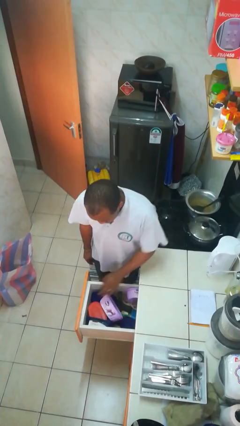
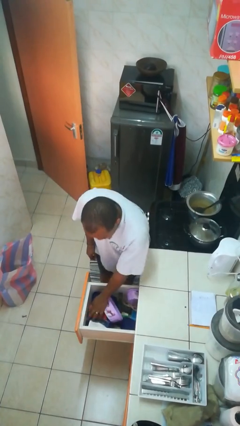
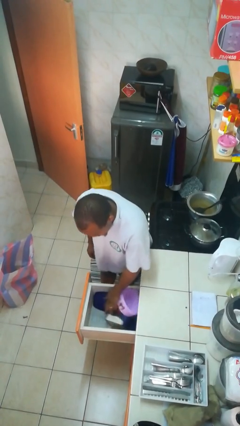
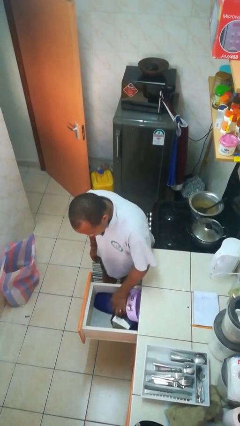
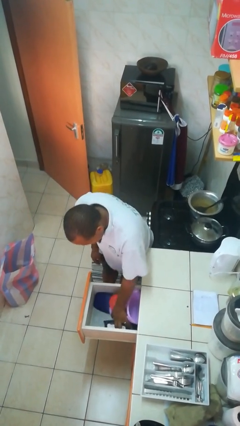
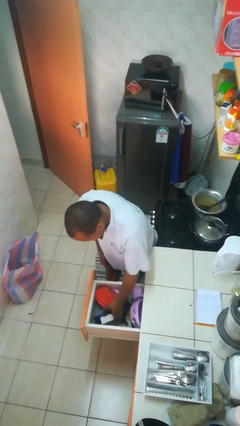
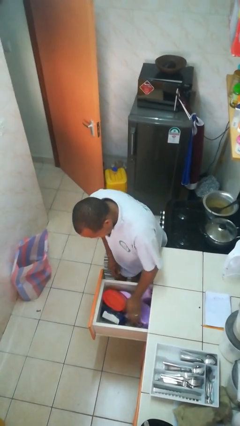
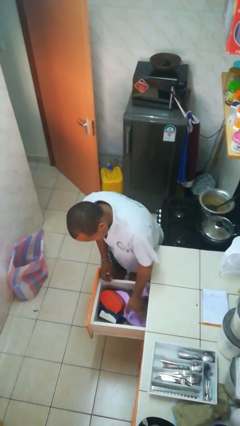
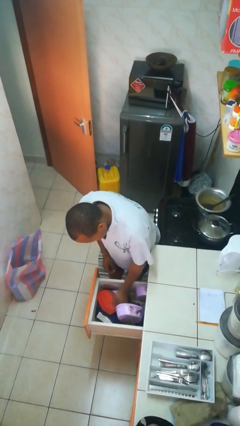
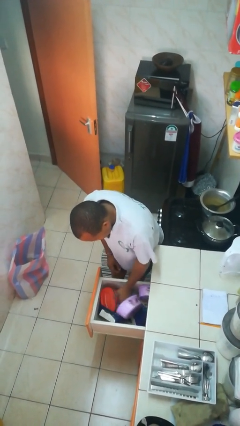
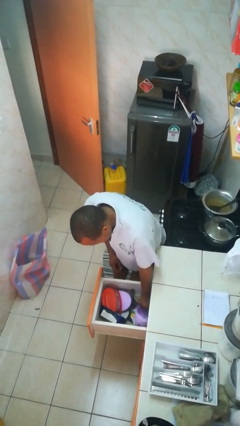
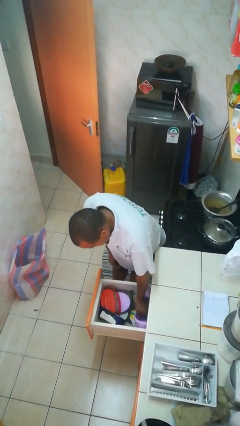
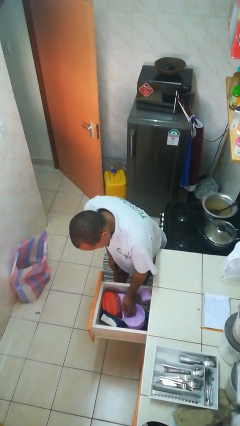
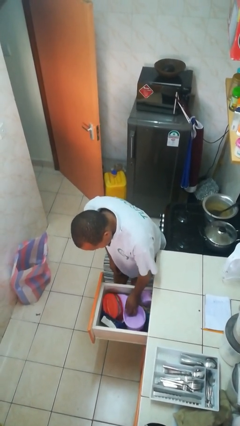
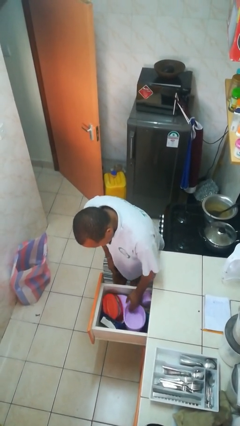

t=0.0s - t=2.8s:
person searches in kitchen drawer

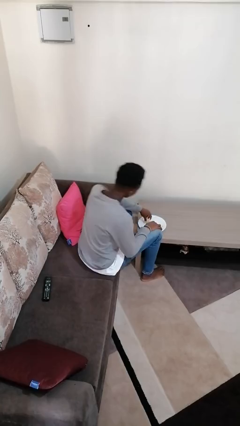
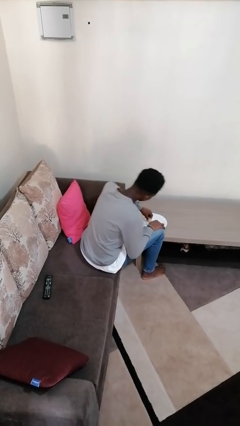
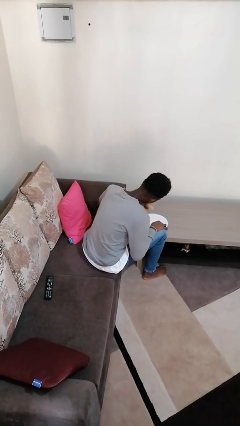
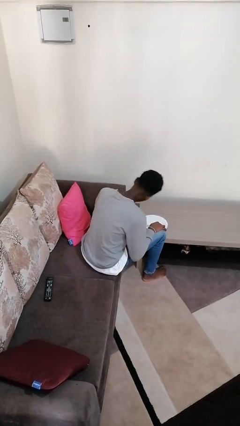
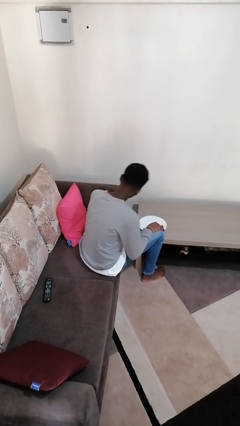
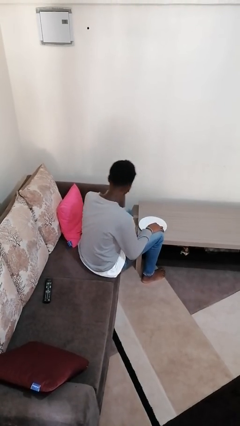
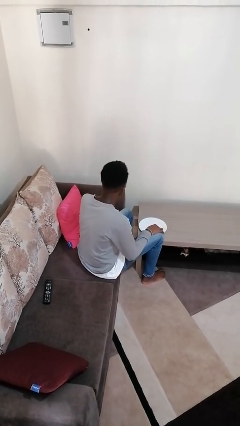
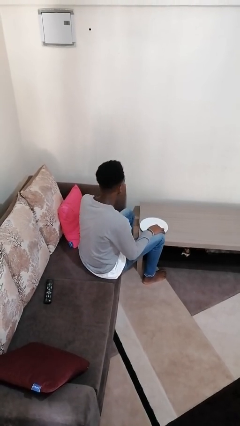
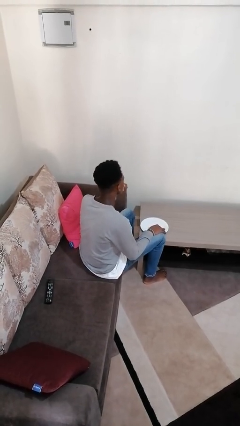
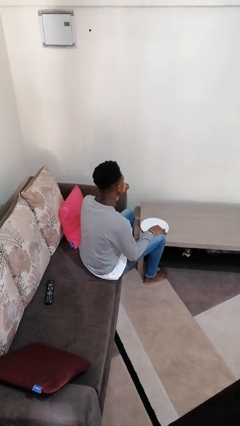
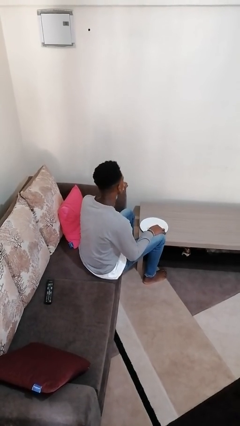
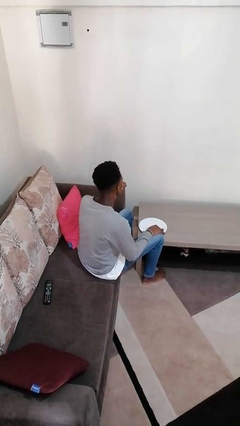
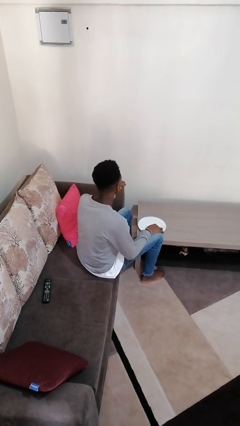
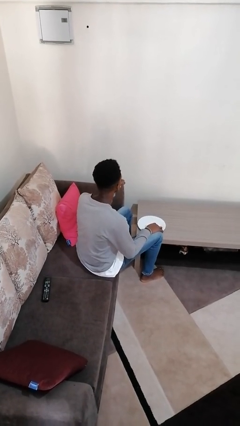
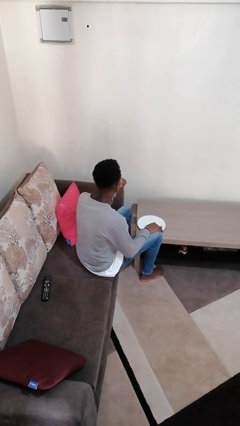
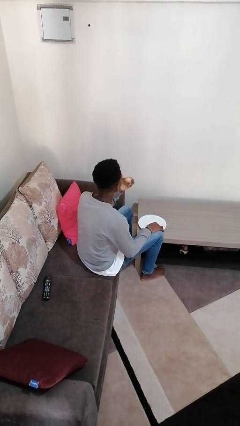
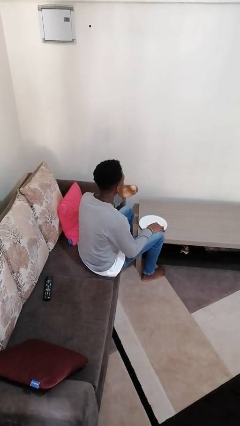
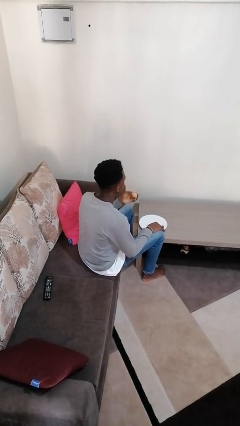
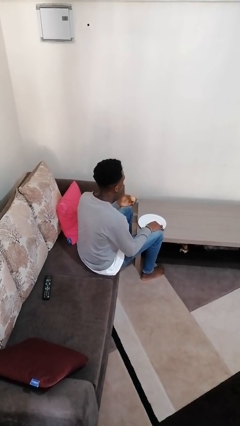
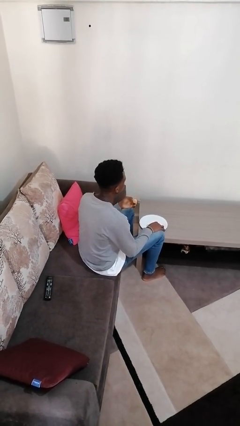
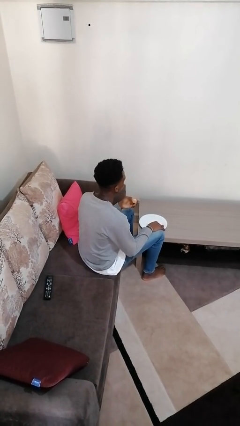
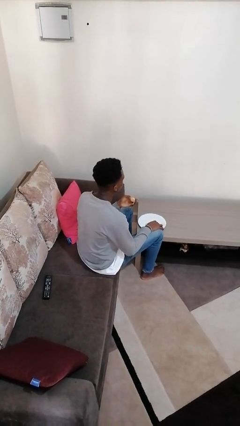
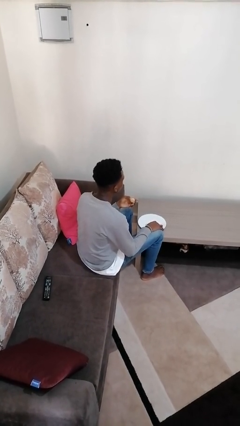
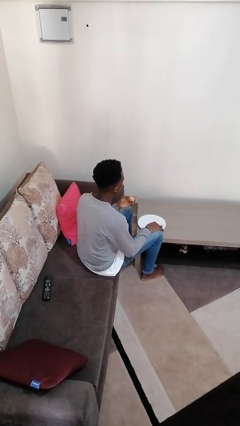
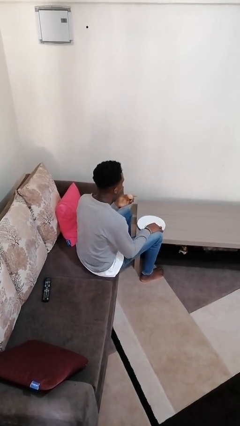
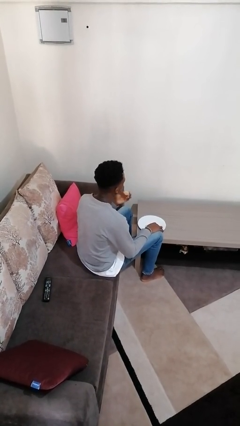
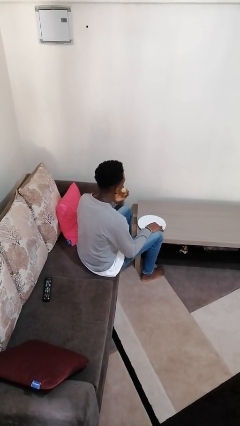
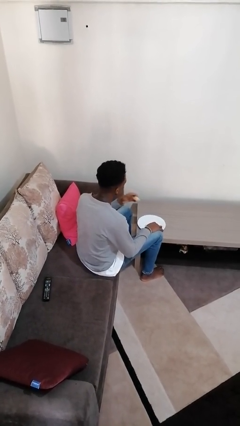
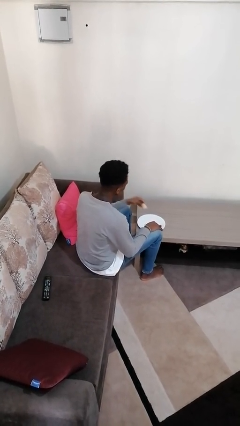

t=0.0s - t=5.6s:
person eats with hands

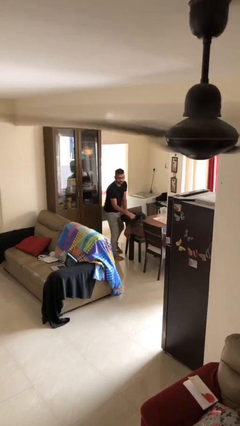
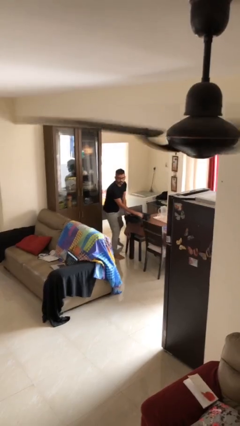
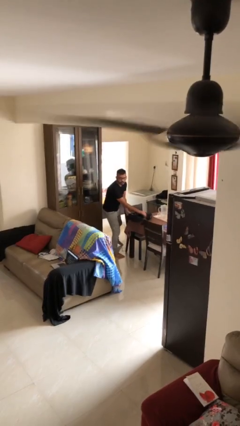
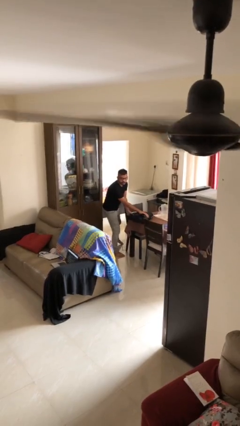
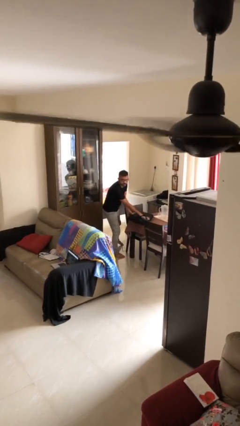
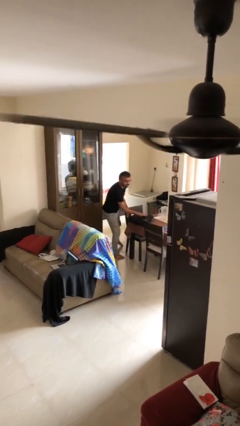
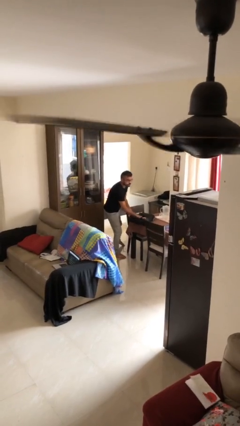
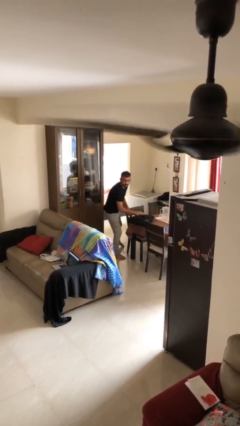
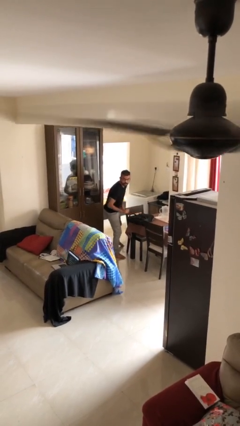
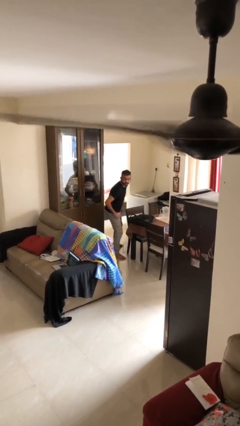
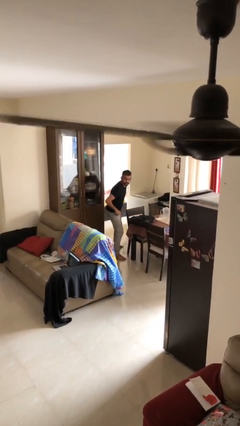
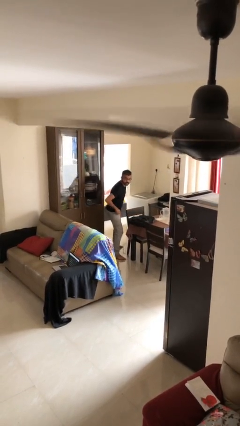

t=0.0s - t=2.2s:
person puts down object on table

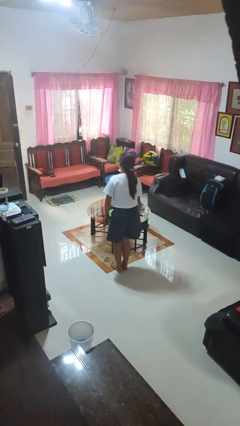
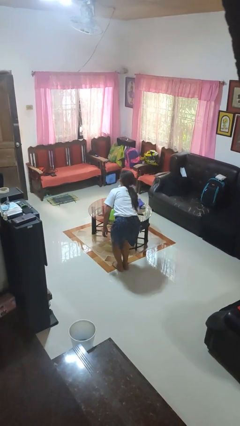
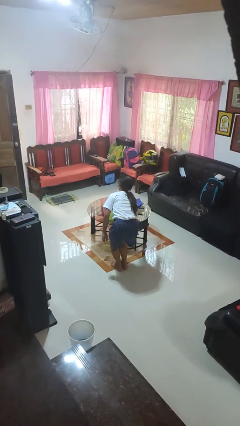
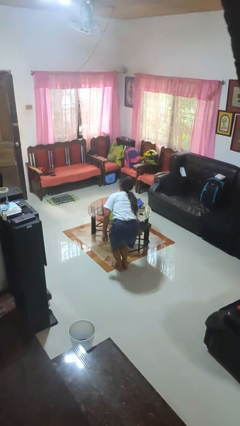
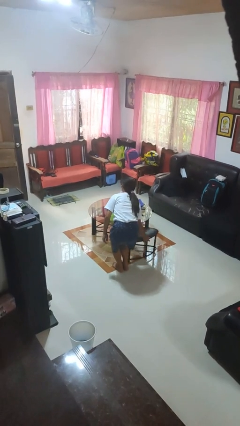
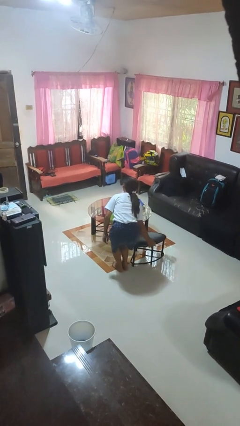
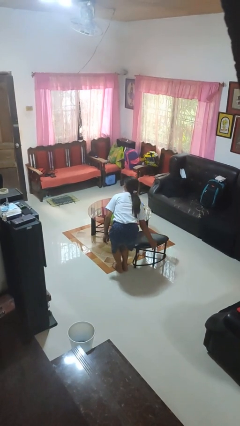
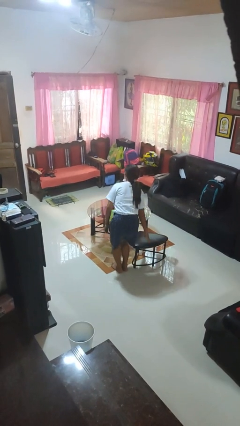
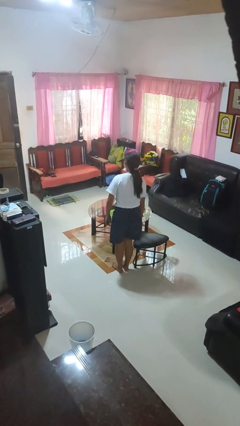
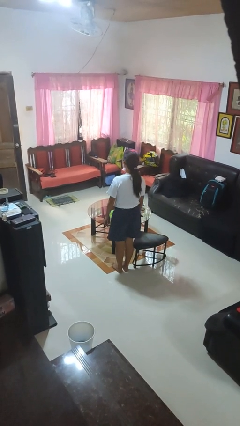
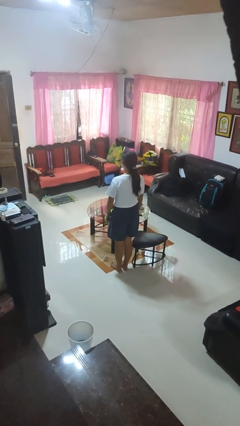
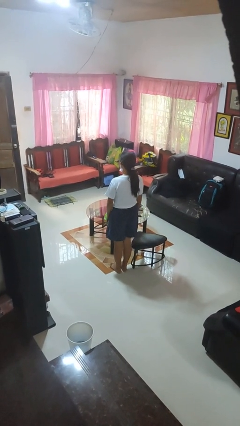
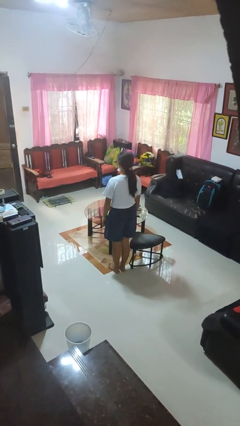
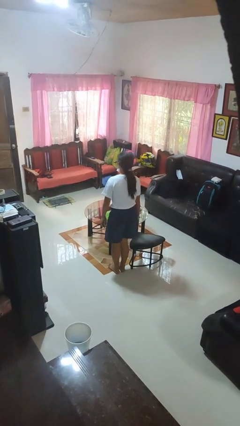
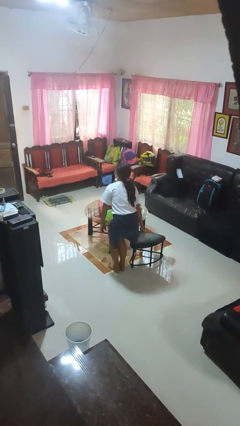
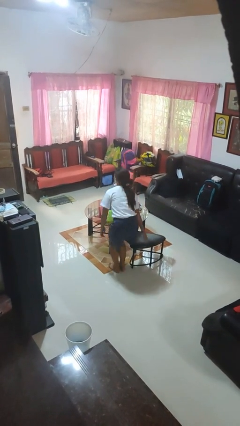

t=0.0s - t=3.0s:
person pulls out chair

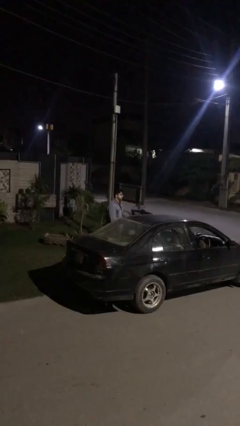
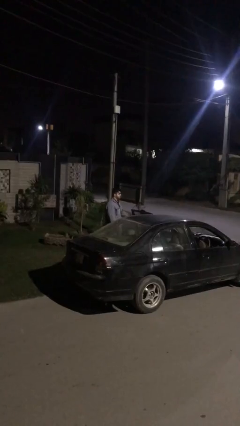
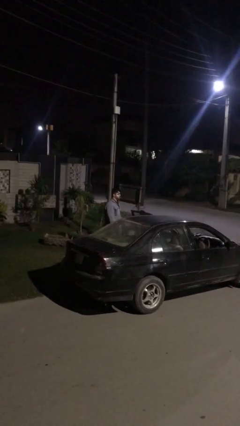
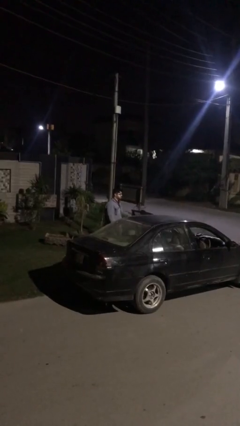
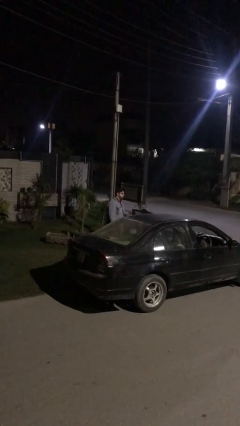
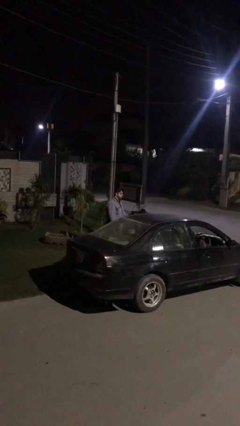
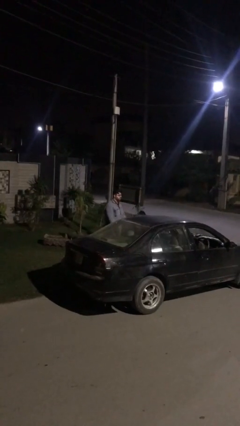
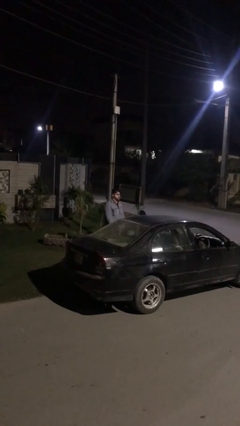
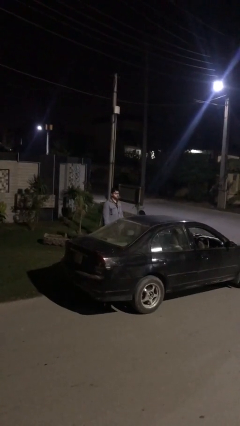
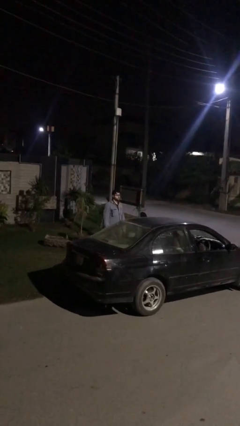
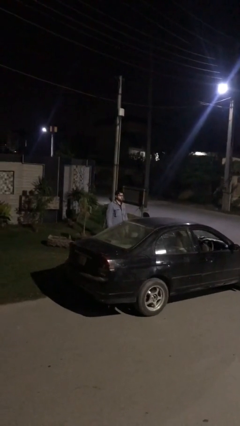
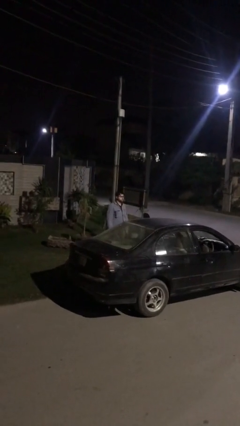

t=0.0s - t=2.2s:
person closes car door

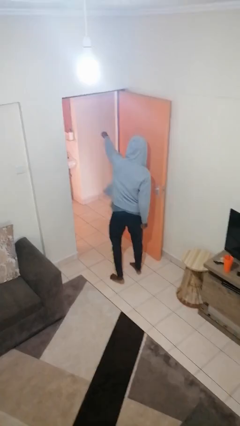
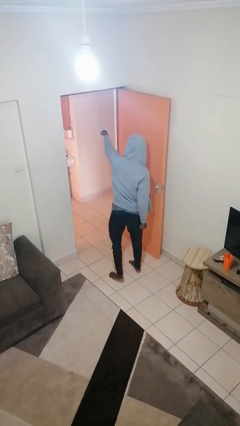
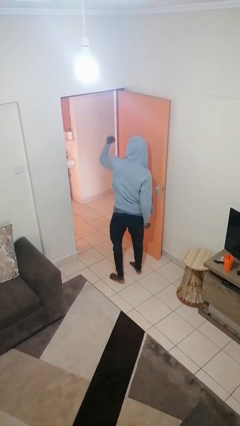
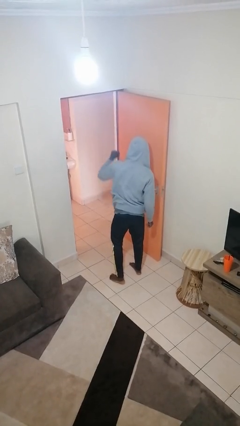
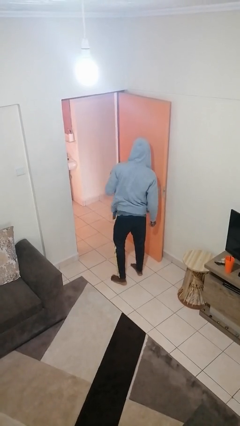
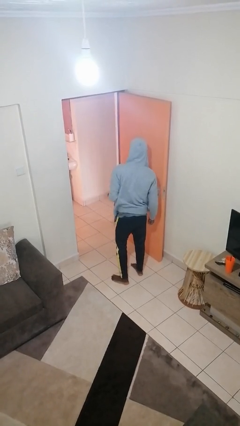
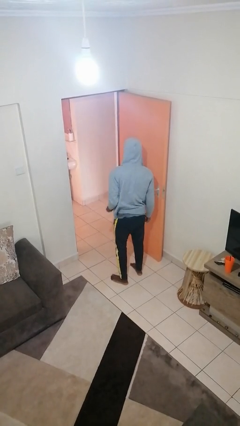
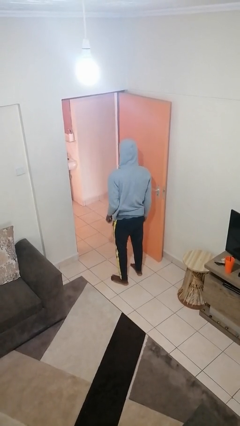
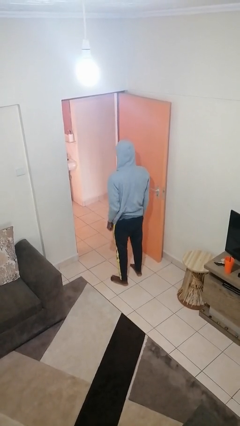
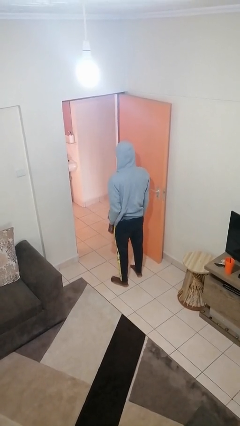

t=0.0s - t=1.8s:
person punches
